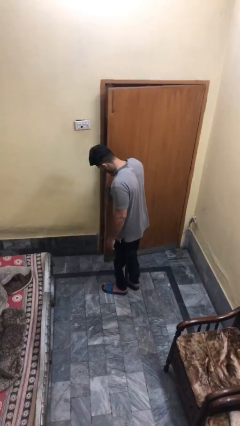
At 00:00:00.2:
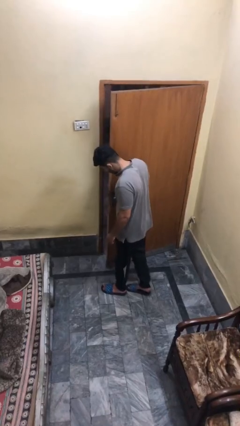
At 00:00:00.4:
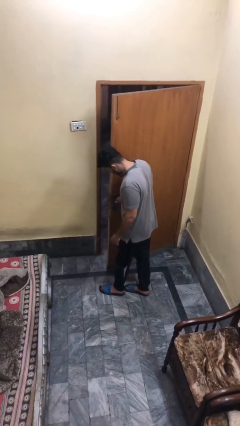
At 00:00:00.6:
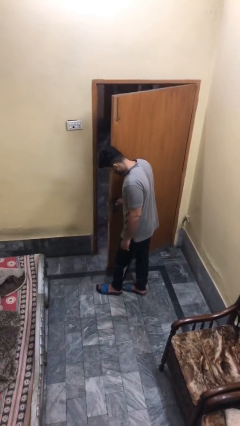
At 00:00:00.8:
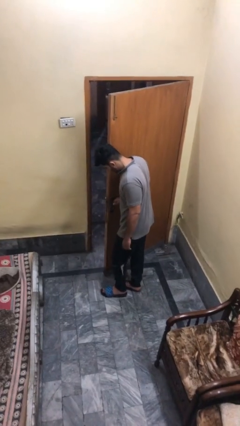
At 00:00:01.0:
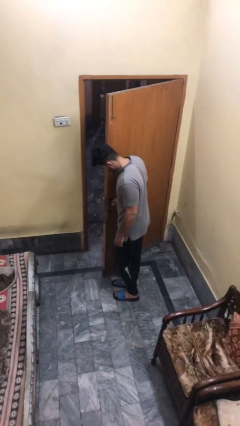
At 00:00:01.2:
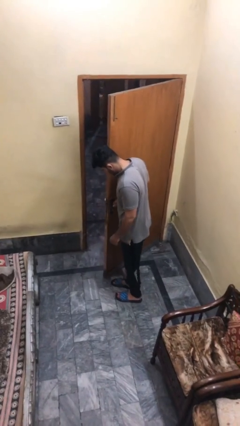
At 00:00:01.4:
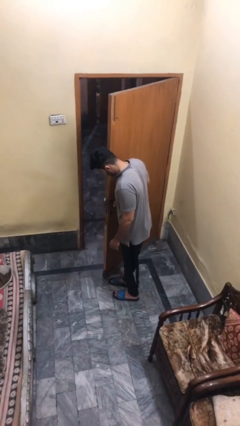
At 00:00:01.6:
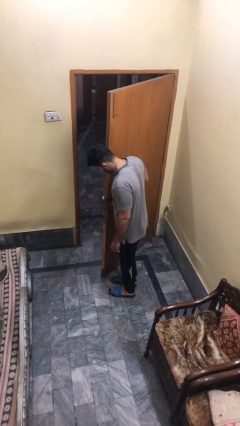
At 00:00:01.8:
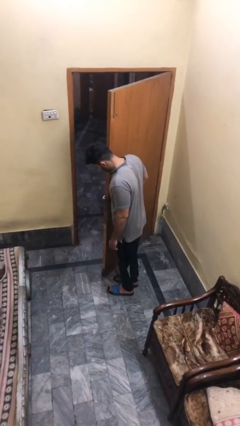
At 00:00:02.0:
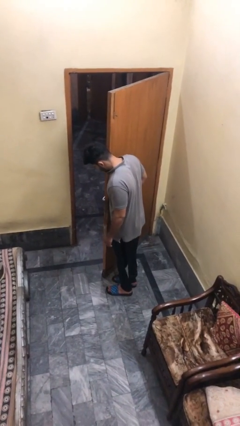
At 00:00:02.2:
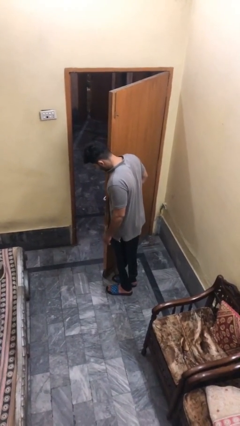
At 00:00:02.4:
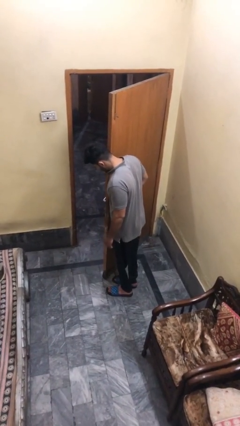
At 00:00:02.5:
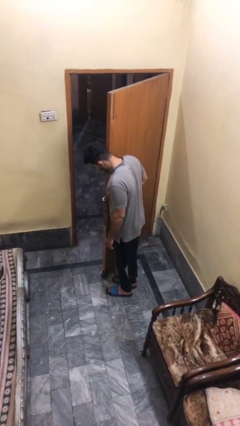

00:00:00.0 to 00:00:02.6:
person opens facility door

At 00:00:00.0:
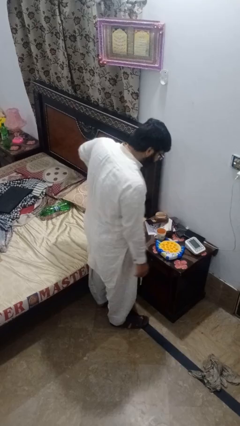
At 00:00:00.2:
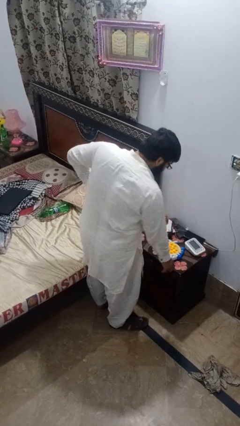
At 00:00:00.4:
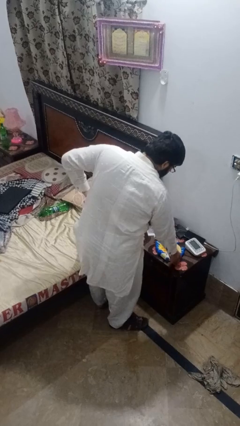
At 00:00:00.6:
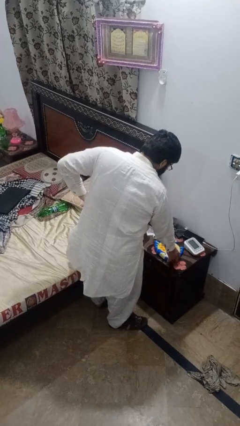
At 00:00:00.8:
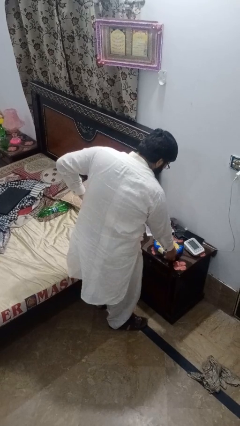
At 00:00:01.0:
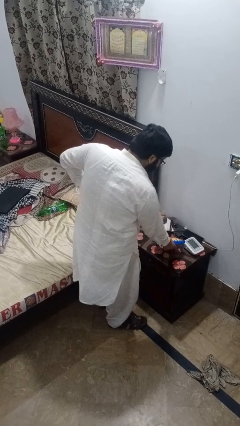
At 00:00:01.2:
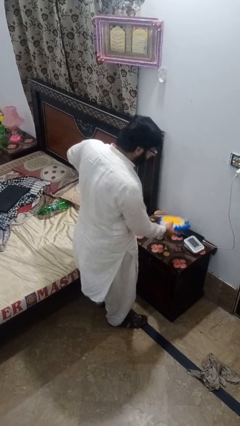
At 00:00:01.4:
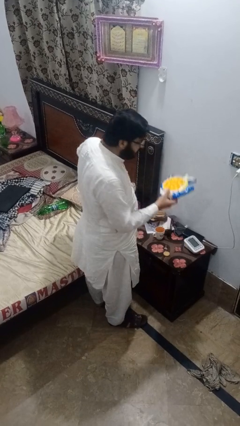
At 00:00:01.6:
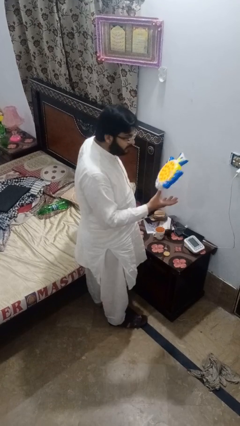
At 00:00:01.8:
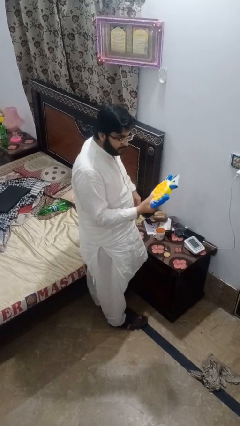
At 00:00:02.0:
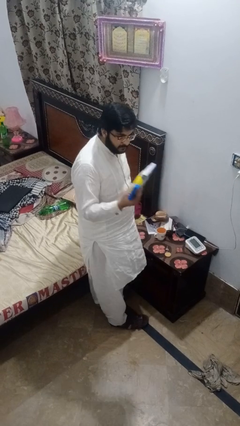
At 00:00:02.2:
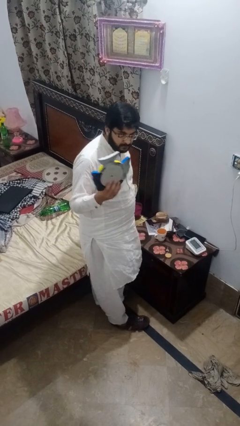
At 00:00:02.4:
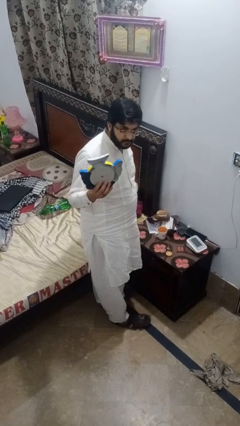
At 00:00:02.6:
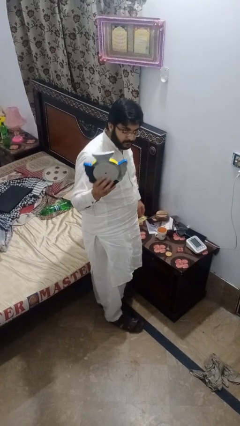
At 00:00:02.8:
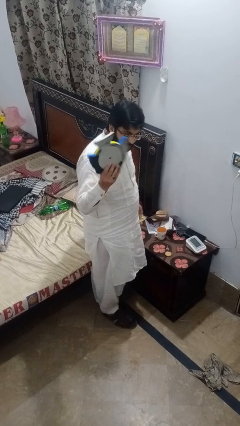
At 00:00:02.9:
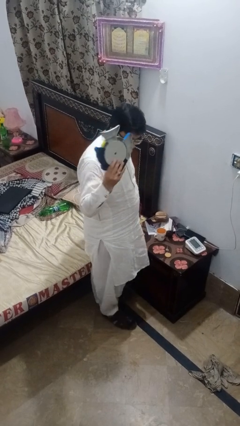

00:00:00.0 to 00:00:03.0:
person picks up object from countertop

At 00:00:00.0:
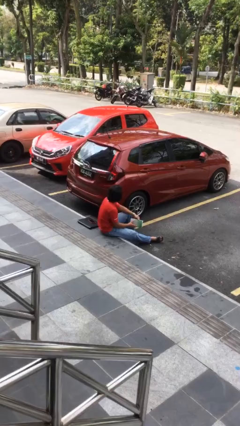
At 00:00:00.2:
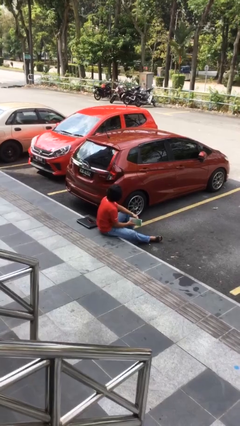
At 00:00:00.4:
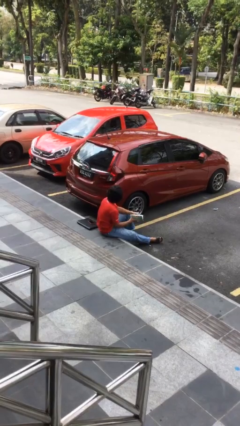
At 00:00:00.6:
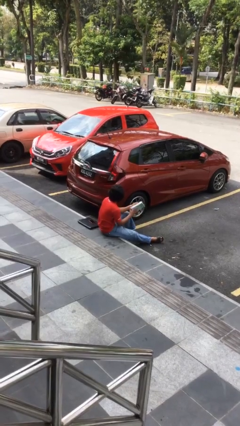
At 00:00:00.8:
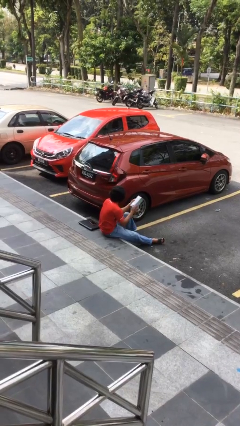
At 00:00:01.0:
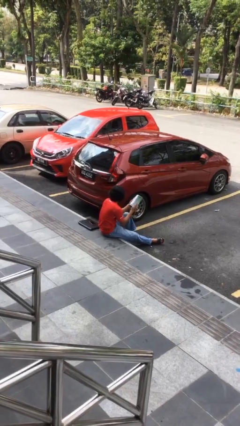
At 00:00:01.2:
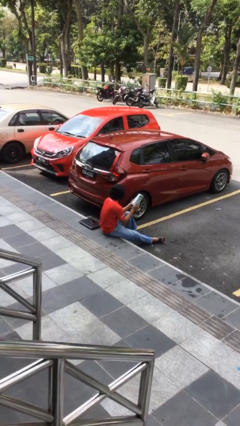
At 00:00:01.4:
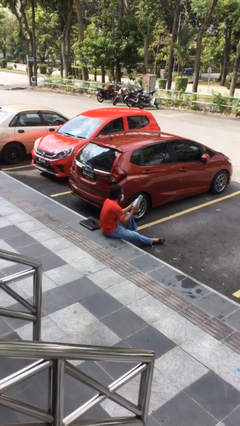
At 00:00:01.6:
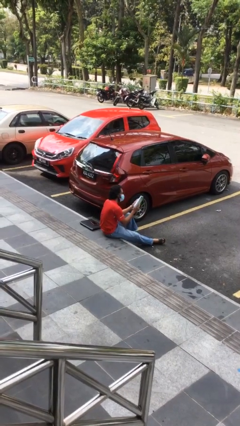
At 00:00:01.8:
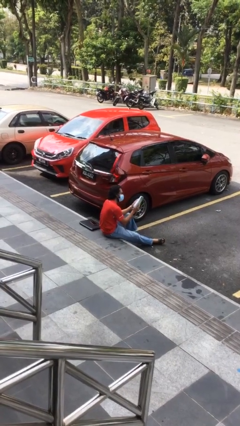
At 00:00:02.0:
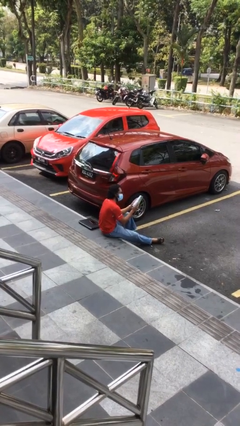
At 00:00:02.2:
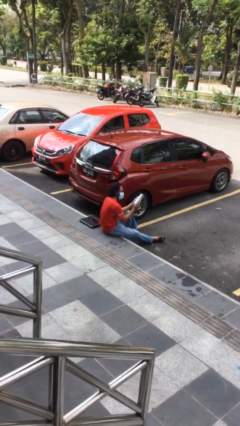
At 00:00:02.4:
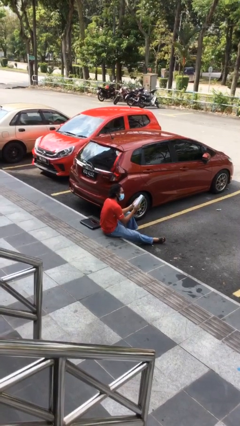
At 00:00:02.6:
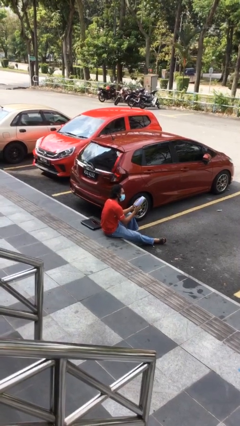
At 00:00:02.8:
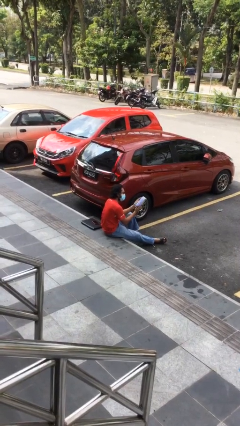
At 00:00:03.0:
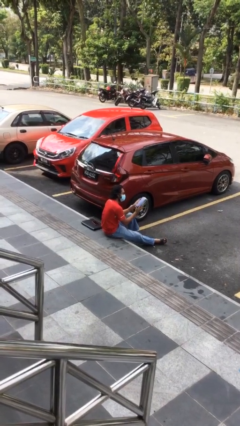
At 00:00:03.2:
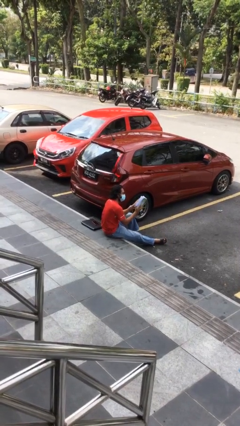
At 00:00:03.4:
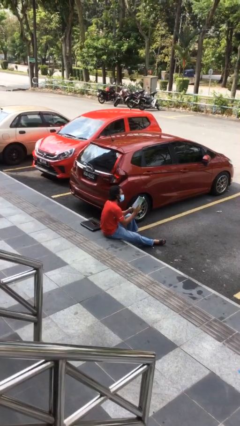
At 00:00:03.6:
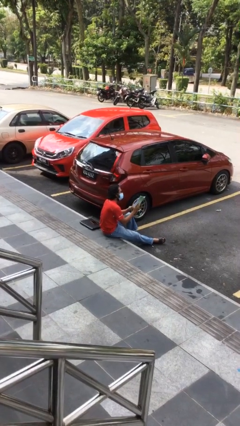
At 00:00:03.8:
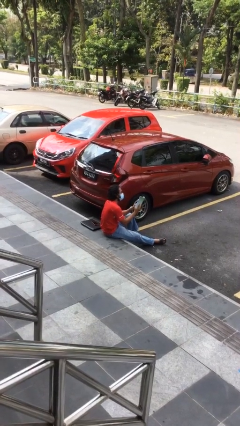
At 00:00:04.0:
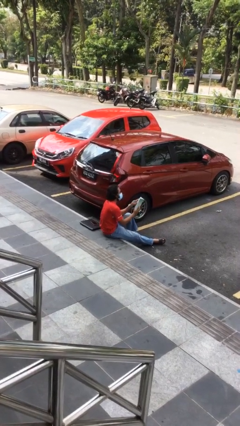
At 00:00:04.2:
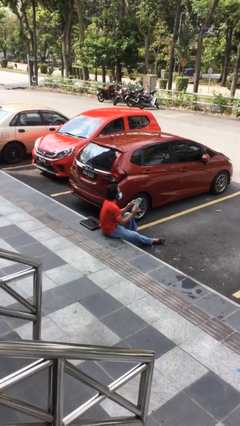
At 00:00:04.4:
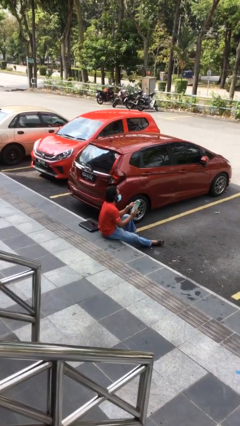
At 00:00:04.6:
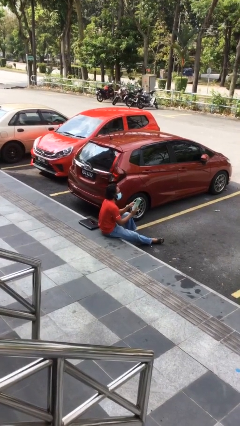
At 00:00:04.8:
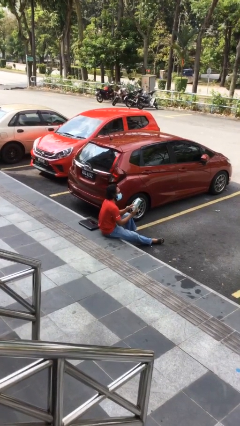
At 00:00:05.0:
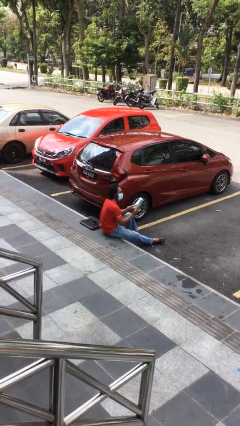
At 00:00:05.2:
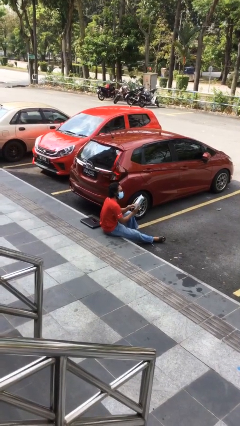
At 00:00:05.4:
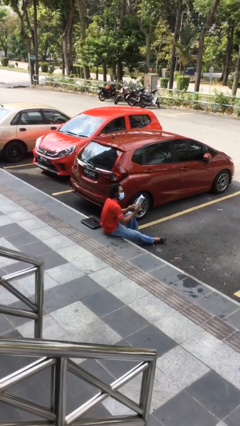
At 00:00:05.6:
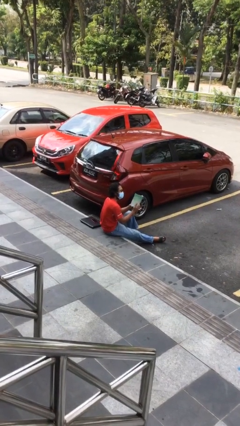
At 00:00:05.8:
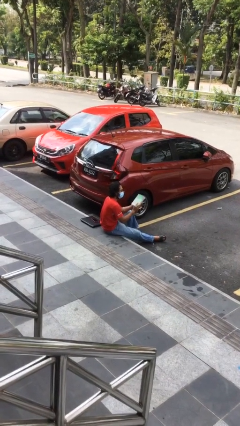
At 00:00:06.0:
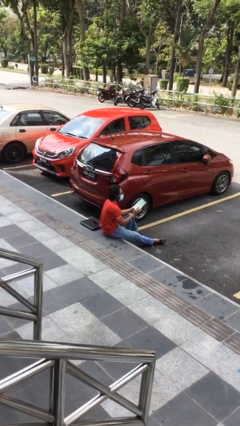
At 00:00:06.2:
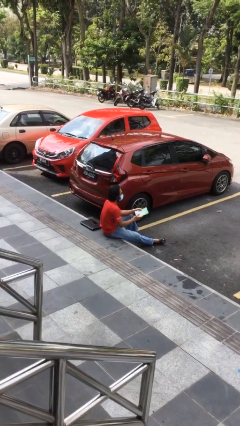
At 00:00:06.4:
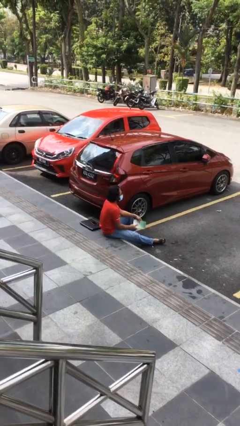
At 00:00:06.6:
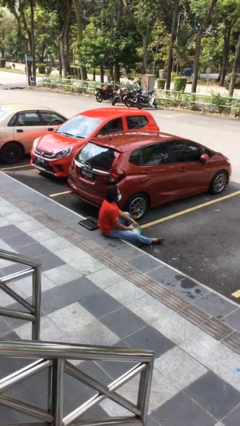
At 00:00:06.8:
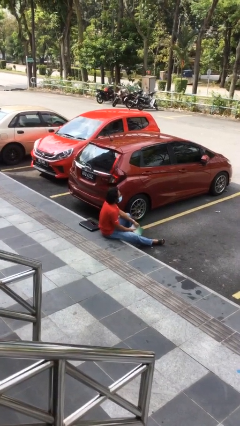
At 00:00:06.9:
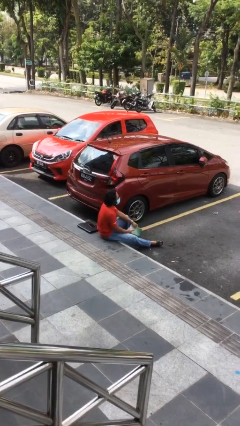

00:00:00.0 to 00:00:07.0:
person reads document

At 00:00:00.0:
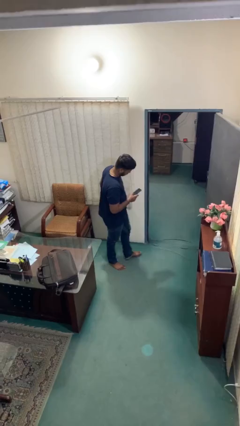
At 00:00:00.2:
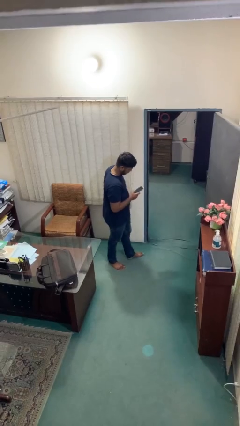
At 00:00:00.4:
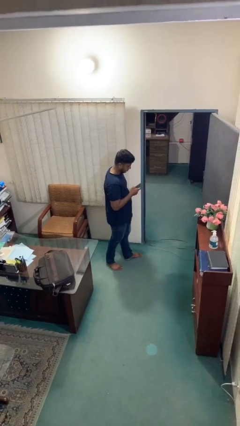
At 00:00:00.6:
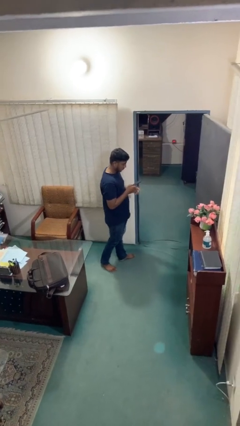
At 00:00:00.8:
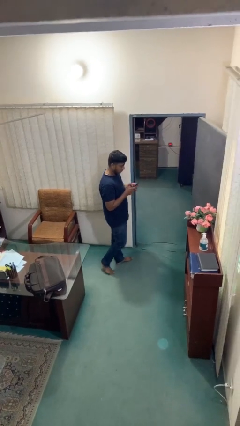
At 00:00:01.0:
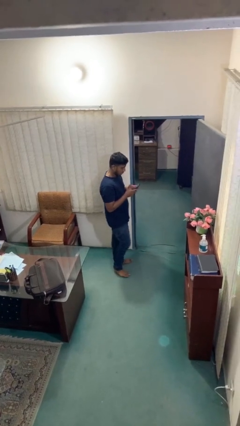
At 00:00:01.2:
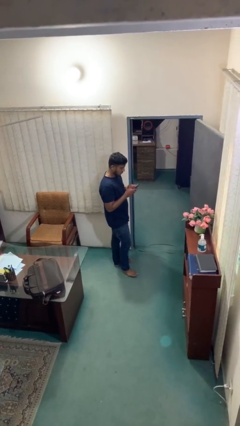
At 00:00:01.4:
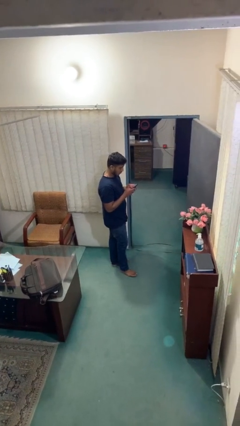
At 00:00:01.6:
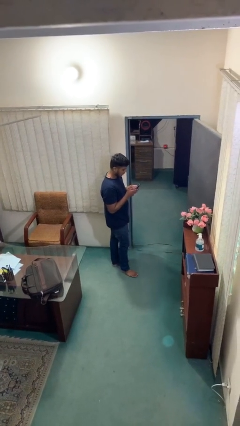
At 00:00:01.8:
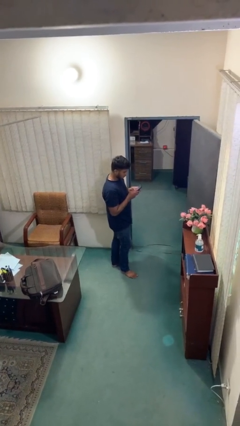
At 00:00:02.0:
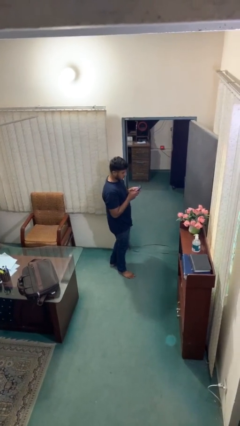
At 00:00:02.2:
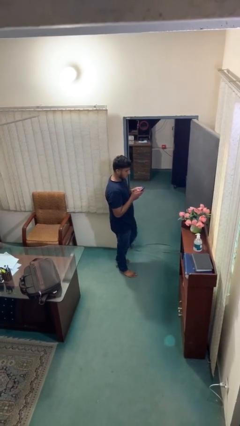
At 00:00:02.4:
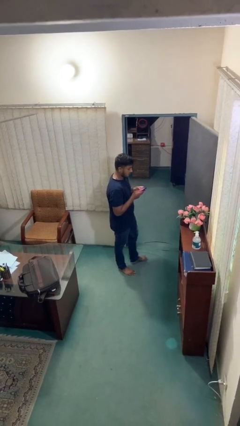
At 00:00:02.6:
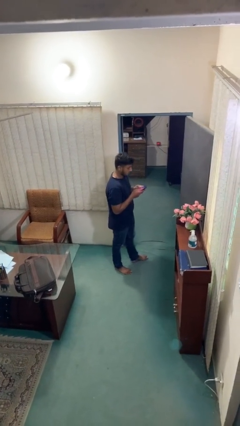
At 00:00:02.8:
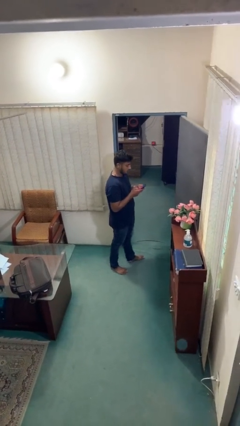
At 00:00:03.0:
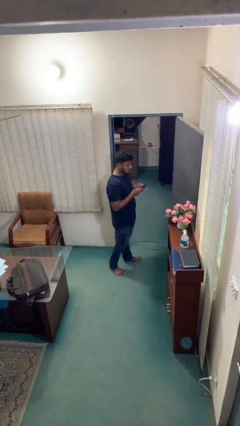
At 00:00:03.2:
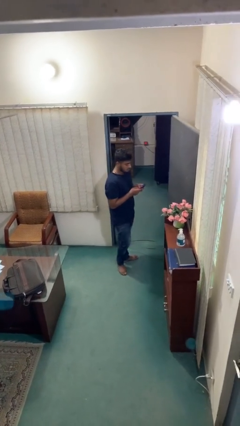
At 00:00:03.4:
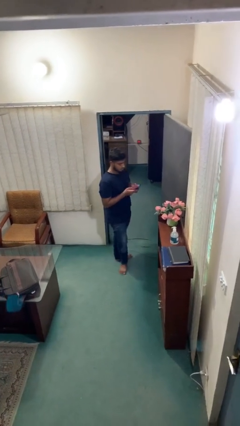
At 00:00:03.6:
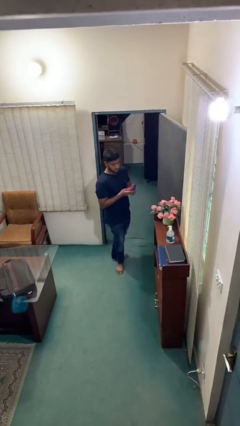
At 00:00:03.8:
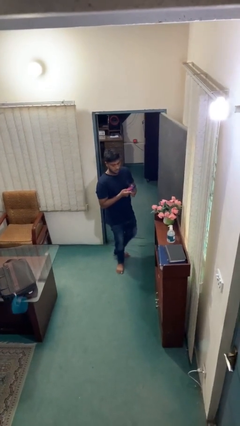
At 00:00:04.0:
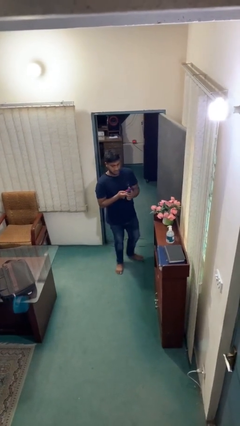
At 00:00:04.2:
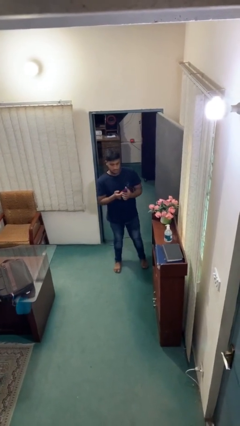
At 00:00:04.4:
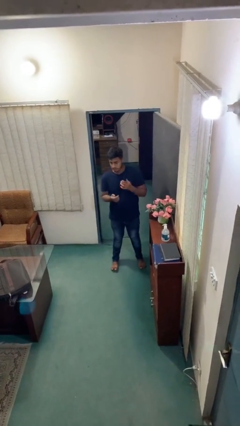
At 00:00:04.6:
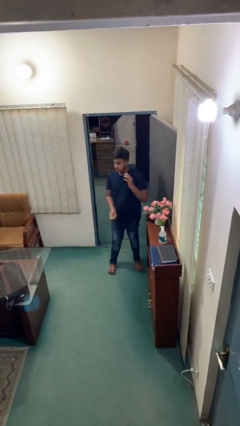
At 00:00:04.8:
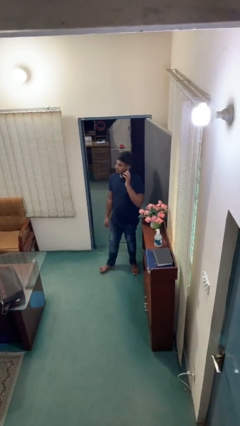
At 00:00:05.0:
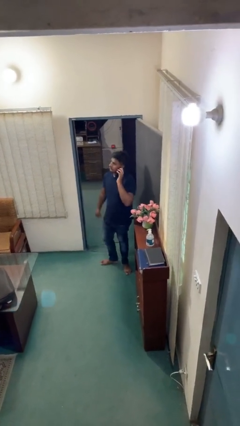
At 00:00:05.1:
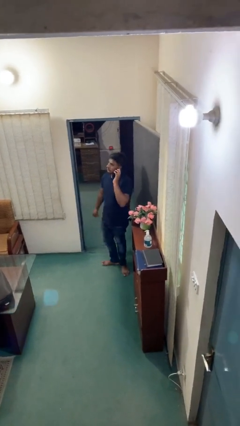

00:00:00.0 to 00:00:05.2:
person texts on phone
